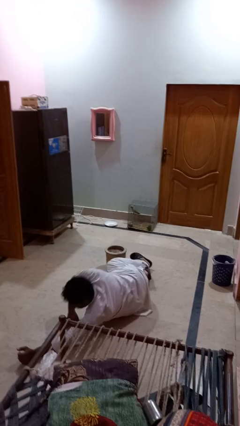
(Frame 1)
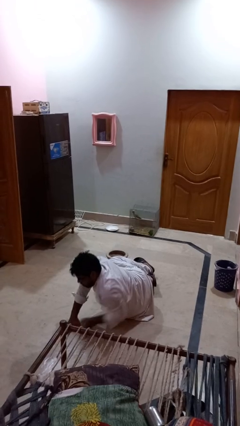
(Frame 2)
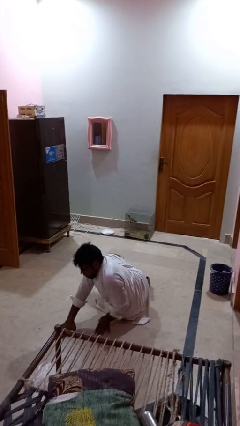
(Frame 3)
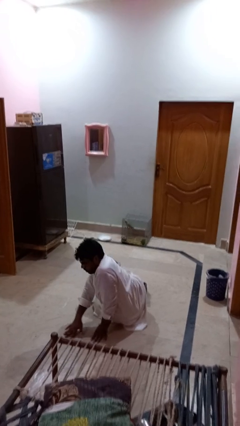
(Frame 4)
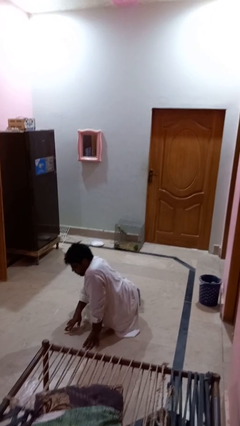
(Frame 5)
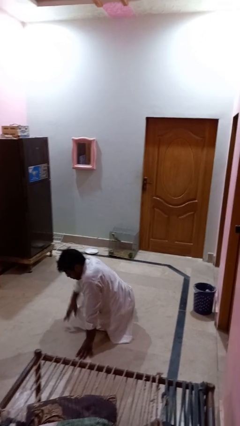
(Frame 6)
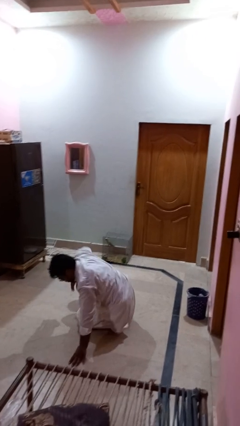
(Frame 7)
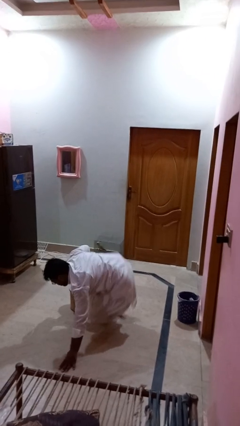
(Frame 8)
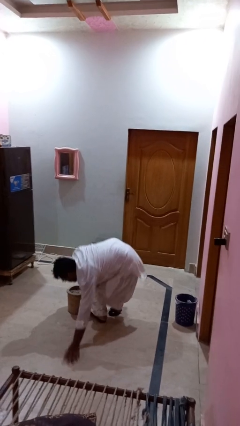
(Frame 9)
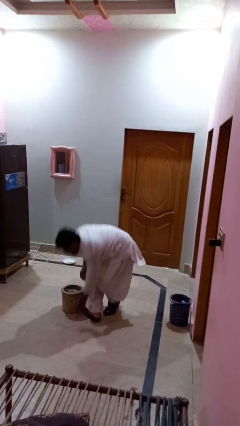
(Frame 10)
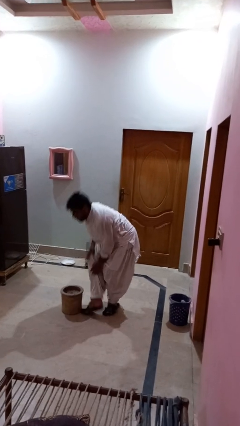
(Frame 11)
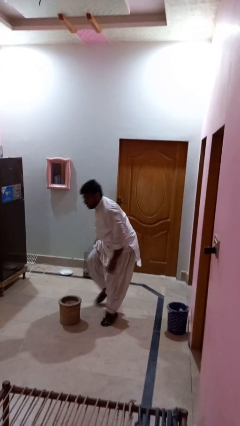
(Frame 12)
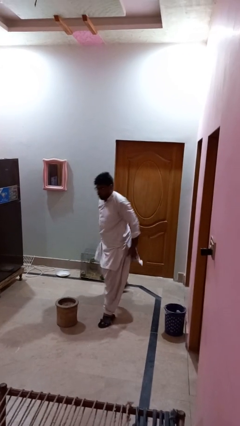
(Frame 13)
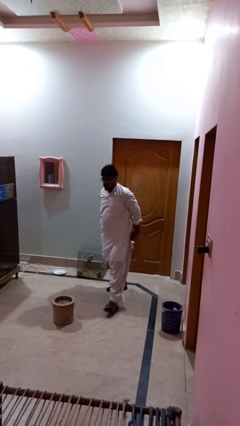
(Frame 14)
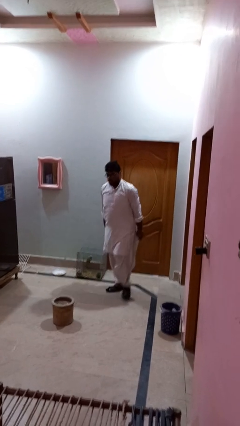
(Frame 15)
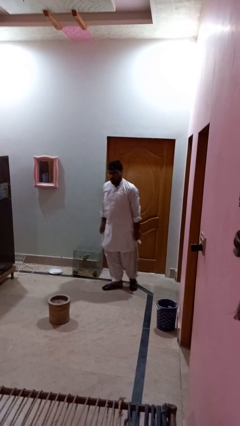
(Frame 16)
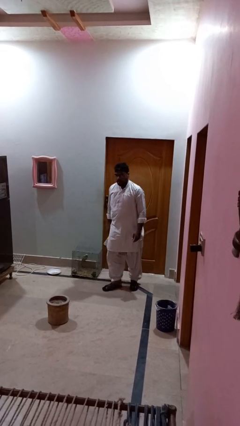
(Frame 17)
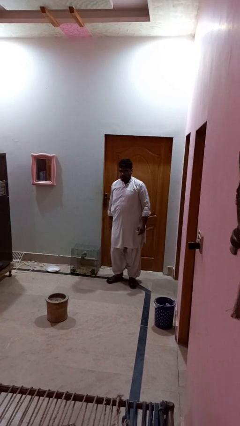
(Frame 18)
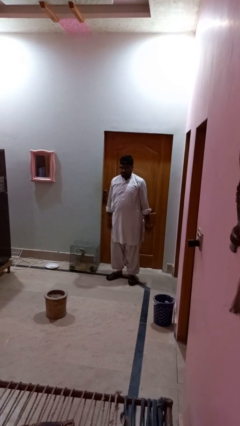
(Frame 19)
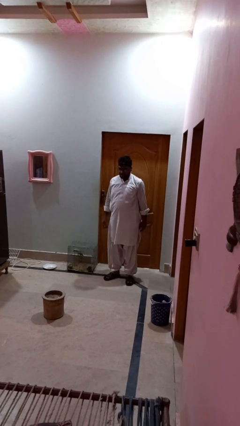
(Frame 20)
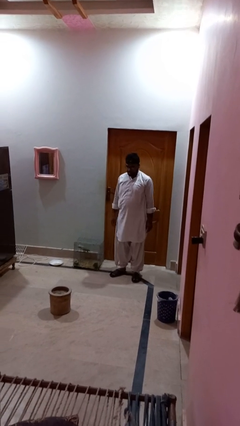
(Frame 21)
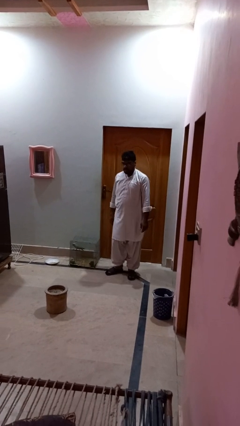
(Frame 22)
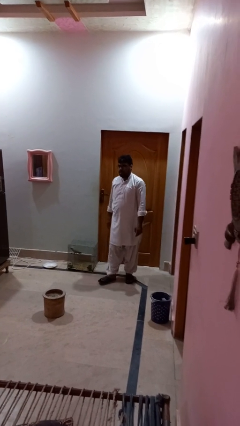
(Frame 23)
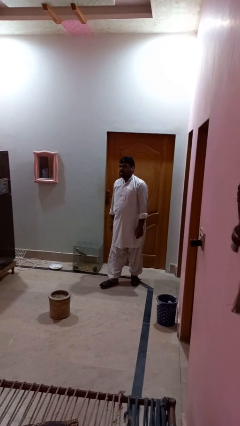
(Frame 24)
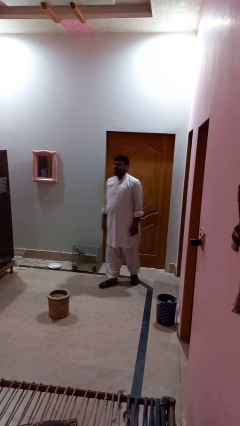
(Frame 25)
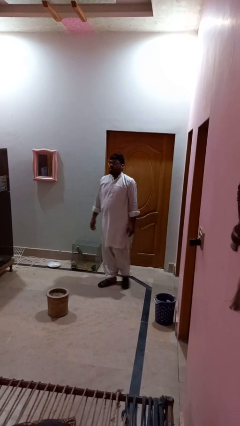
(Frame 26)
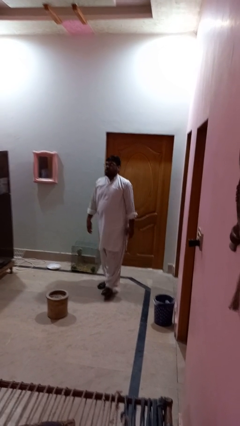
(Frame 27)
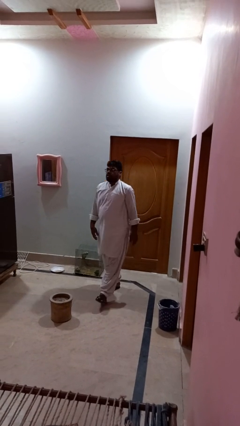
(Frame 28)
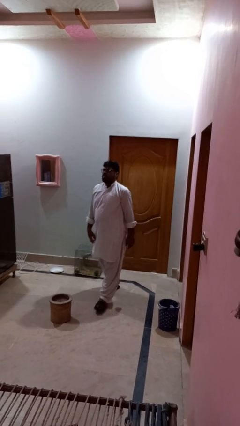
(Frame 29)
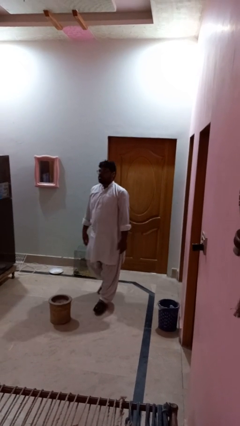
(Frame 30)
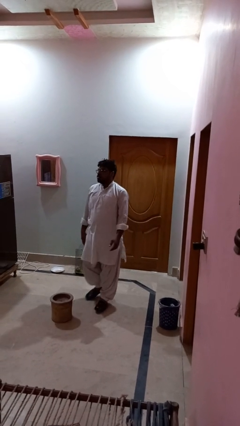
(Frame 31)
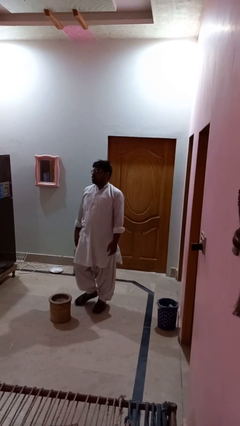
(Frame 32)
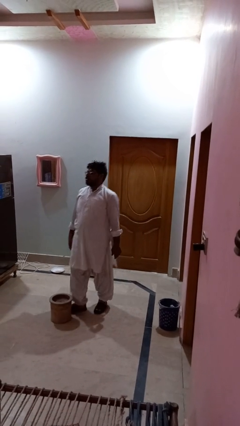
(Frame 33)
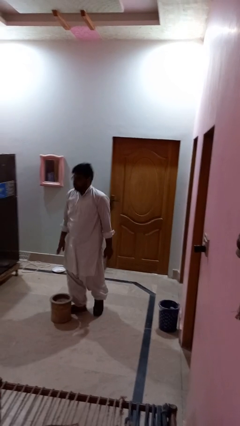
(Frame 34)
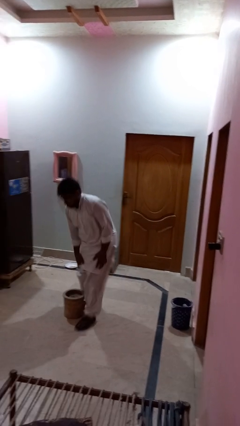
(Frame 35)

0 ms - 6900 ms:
person stands up from floor

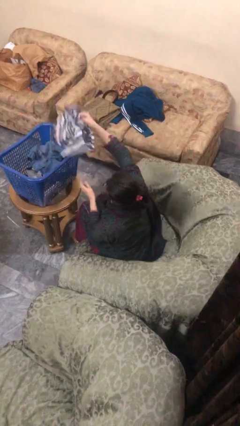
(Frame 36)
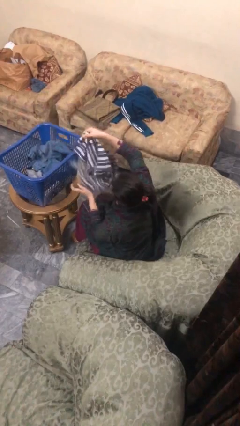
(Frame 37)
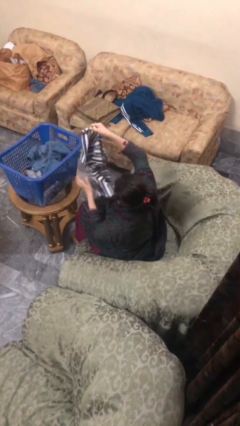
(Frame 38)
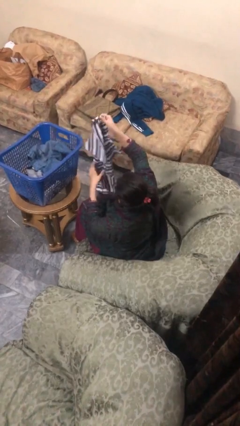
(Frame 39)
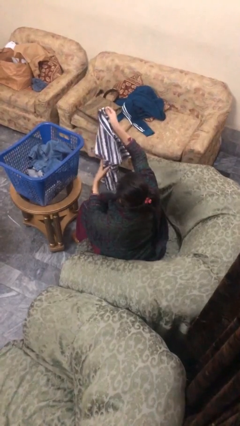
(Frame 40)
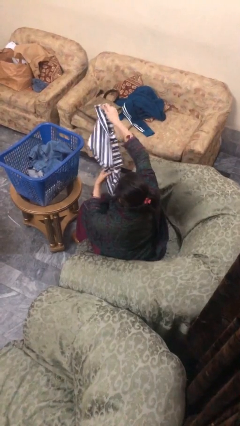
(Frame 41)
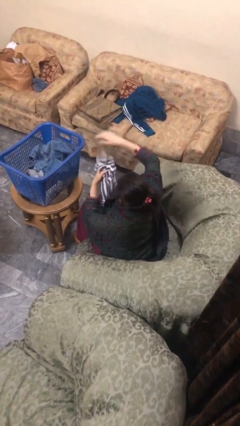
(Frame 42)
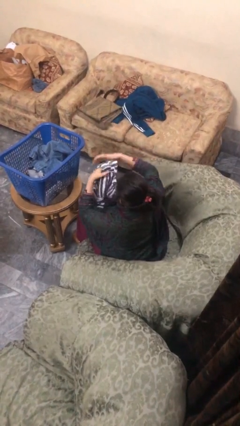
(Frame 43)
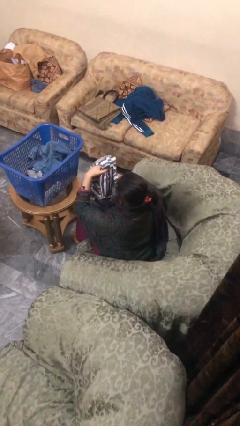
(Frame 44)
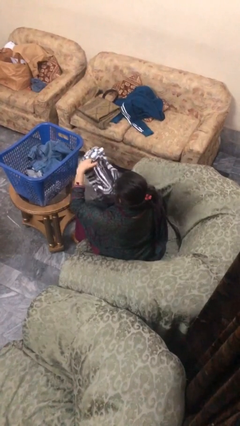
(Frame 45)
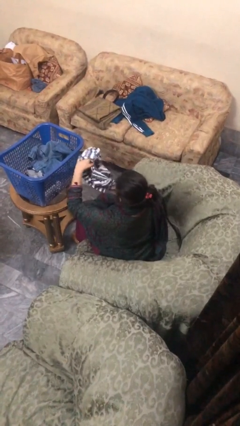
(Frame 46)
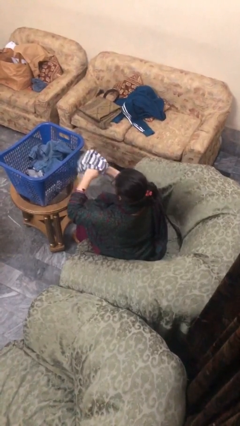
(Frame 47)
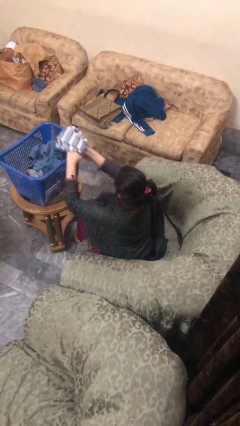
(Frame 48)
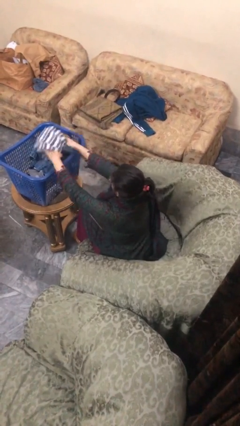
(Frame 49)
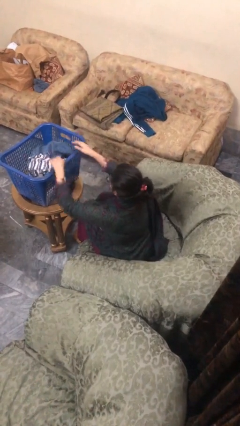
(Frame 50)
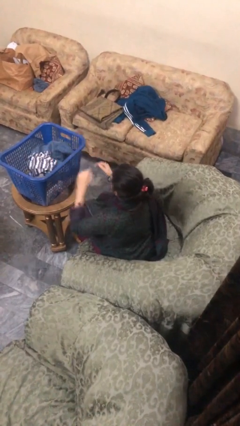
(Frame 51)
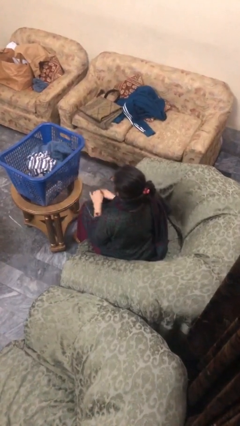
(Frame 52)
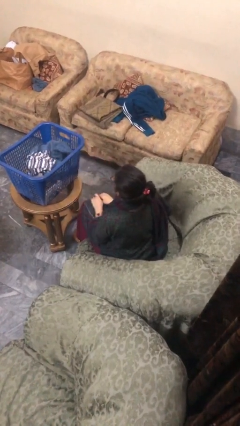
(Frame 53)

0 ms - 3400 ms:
person folds shirt

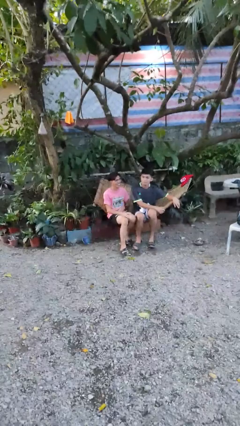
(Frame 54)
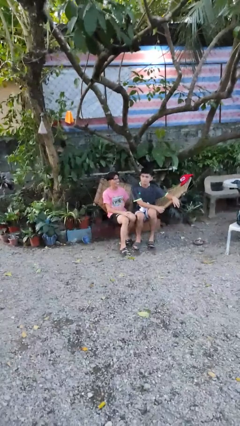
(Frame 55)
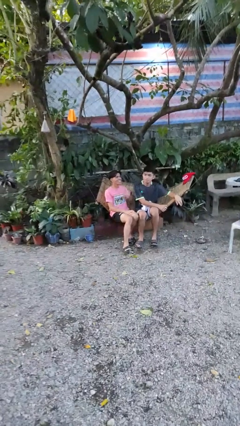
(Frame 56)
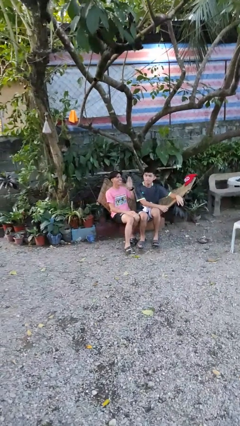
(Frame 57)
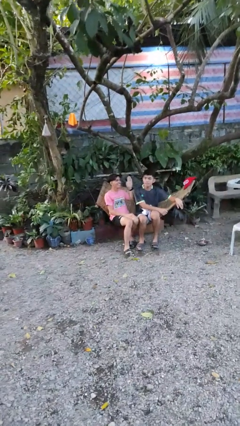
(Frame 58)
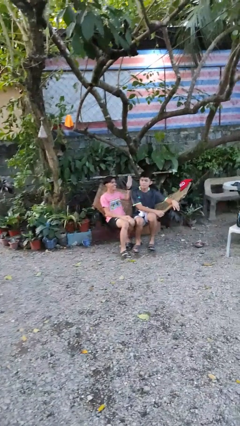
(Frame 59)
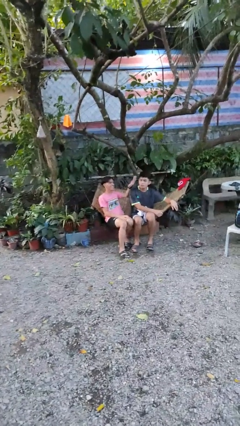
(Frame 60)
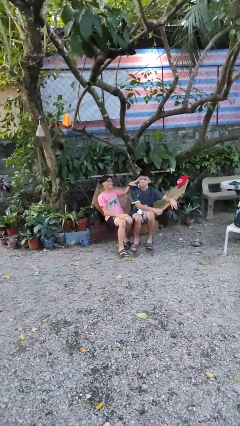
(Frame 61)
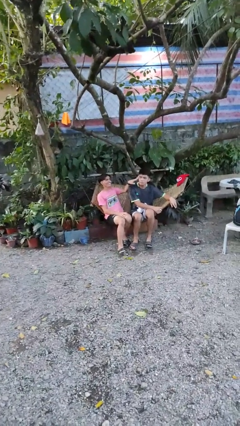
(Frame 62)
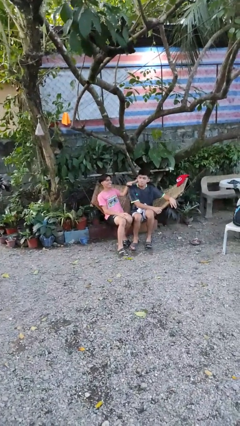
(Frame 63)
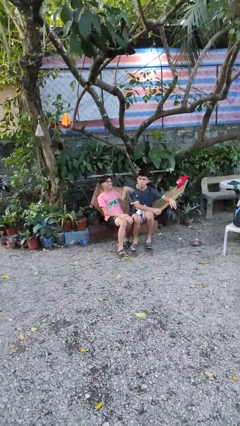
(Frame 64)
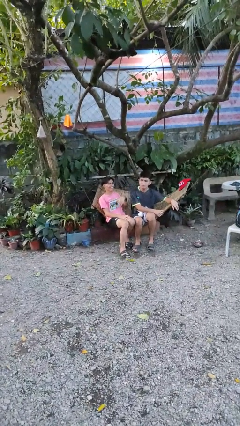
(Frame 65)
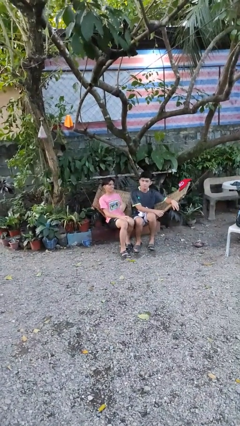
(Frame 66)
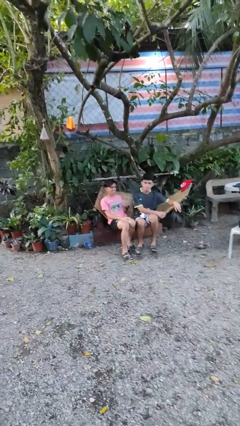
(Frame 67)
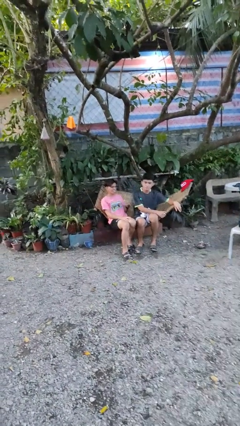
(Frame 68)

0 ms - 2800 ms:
person touches face of person

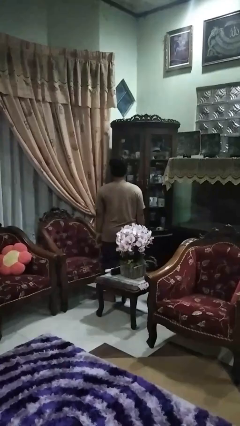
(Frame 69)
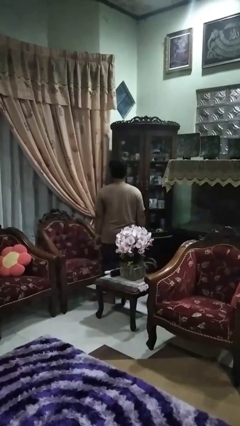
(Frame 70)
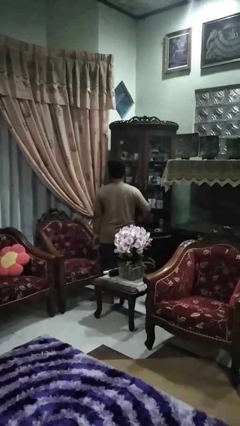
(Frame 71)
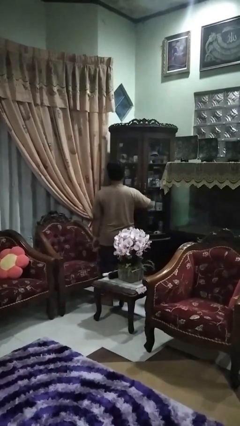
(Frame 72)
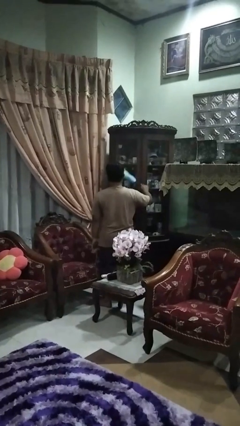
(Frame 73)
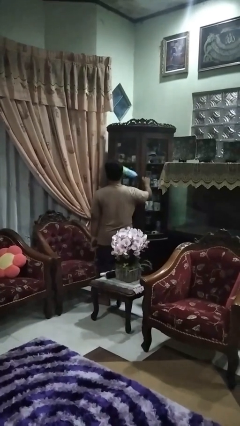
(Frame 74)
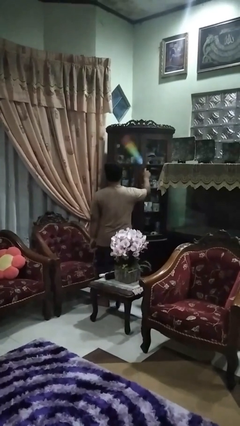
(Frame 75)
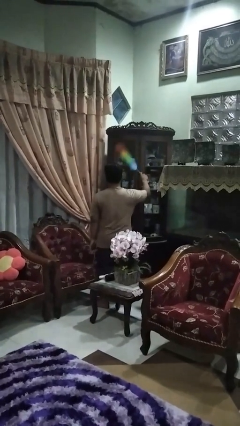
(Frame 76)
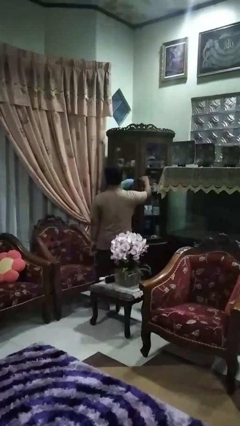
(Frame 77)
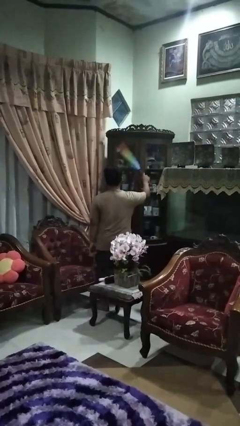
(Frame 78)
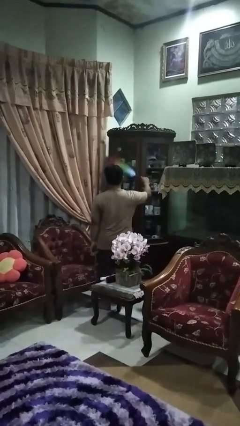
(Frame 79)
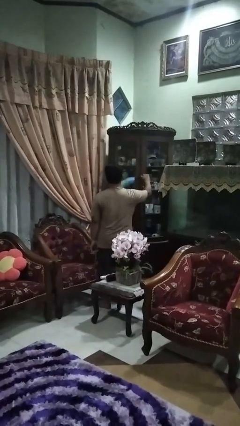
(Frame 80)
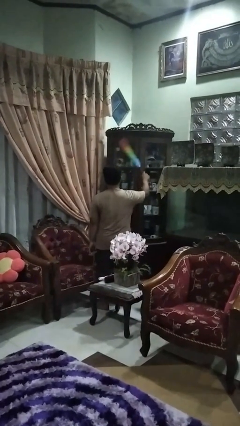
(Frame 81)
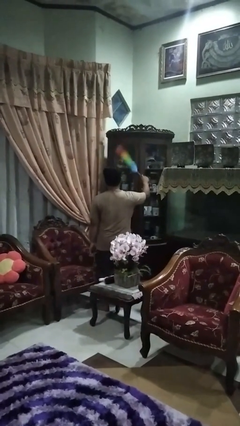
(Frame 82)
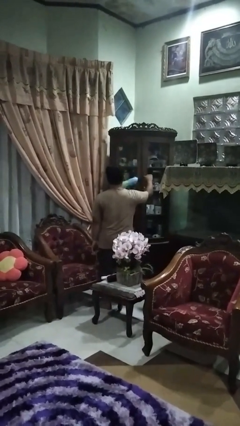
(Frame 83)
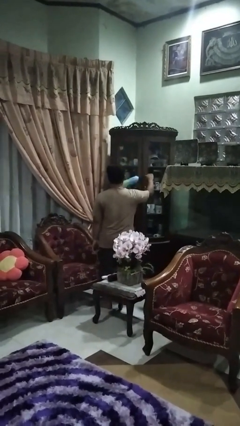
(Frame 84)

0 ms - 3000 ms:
person dusts furniture

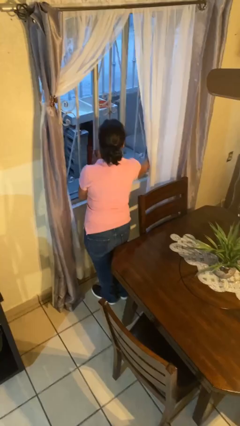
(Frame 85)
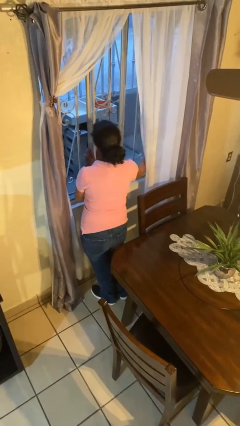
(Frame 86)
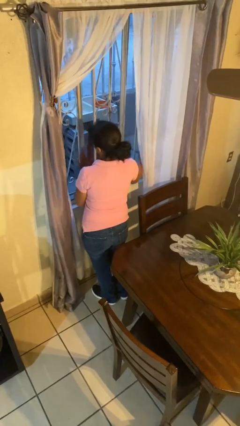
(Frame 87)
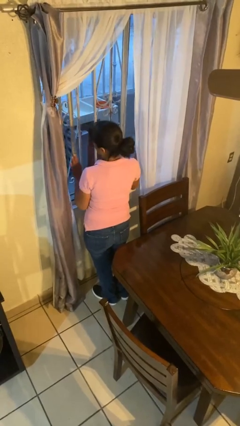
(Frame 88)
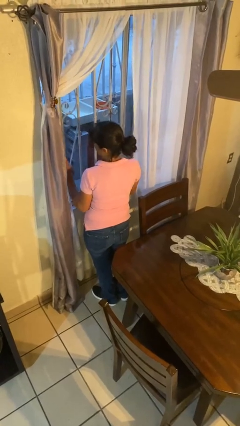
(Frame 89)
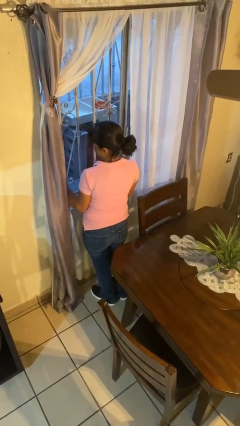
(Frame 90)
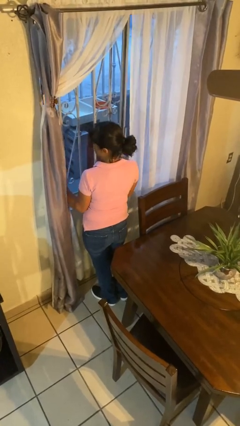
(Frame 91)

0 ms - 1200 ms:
person closes home window

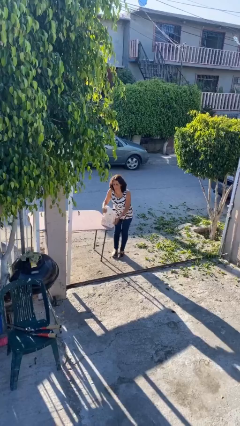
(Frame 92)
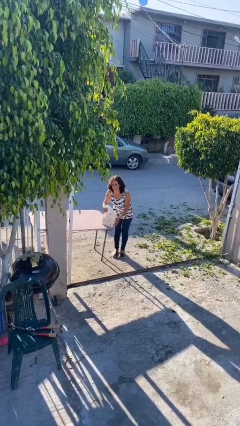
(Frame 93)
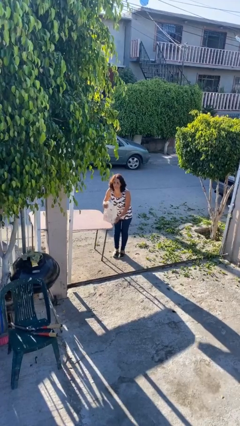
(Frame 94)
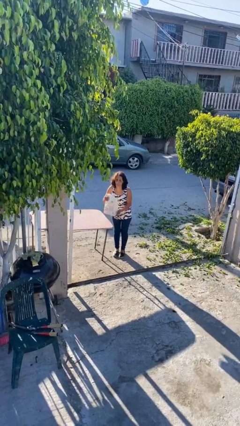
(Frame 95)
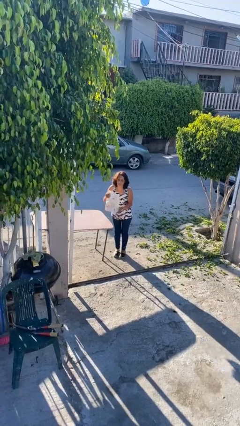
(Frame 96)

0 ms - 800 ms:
person picks up object from table
